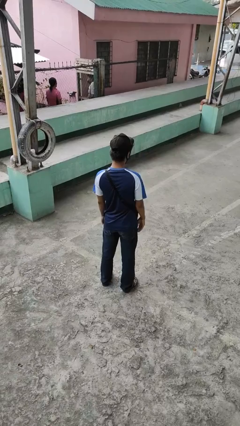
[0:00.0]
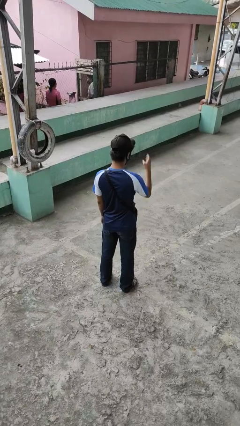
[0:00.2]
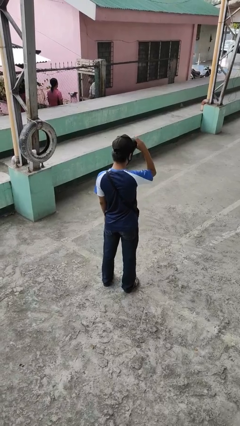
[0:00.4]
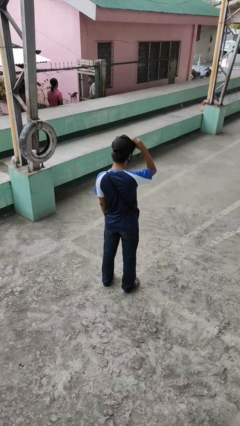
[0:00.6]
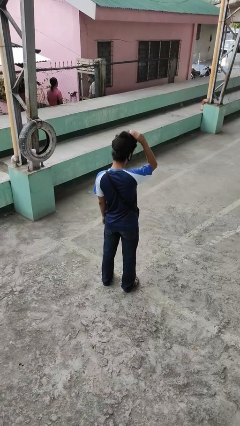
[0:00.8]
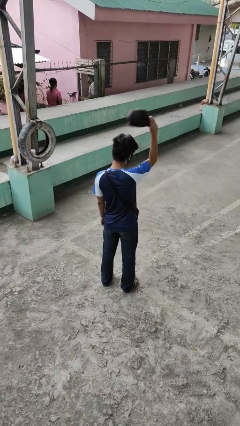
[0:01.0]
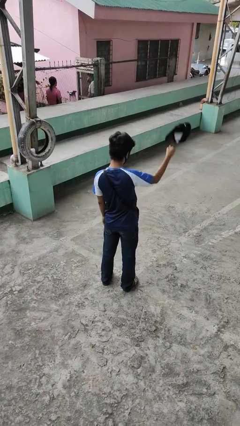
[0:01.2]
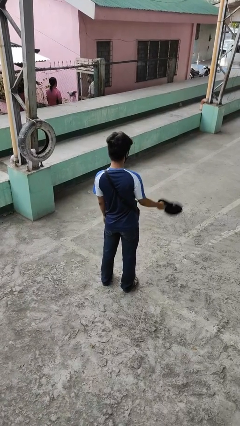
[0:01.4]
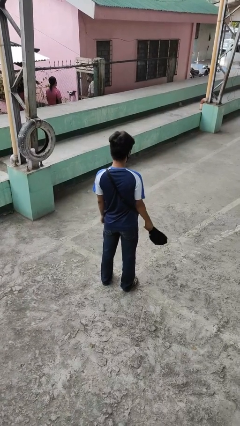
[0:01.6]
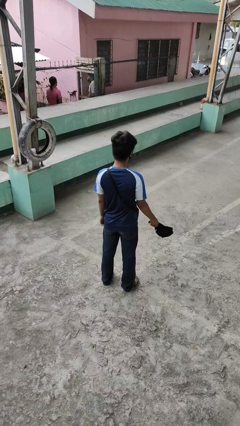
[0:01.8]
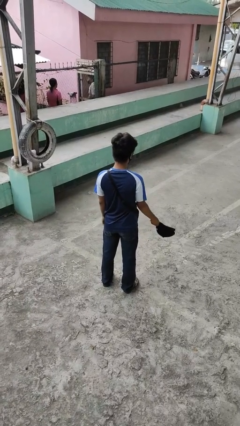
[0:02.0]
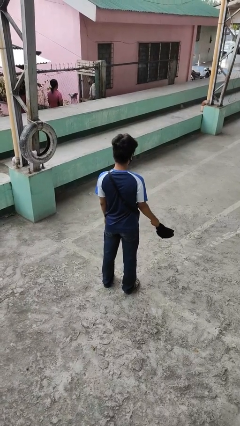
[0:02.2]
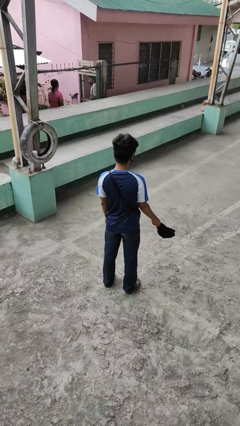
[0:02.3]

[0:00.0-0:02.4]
person takes off hat

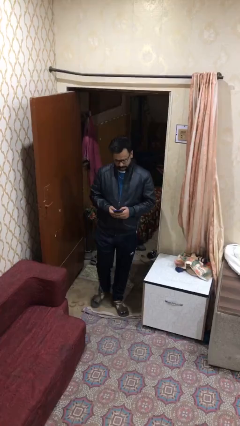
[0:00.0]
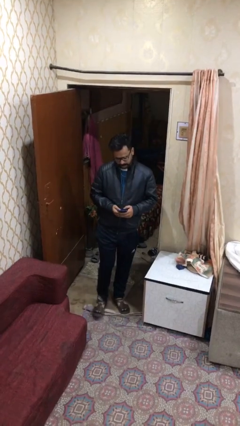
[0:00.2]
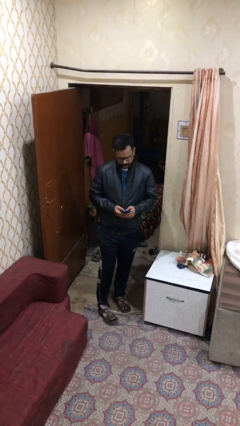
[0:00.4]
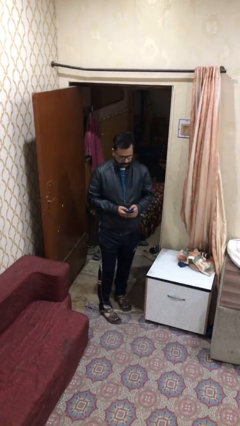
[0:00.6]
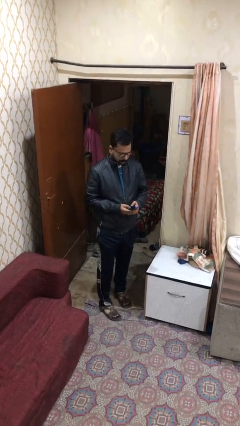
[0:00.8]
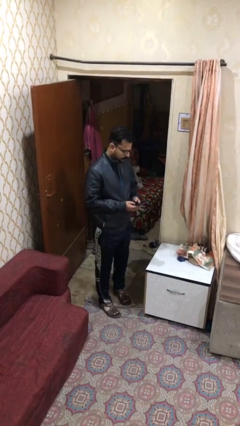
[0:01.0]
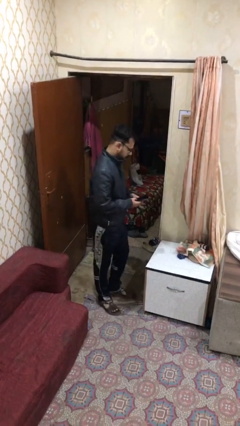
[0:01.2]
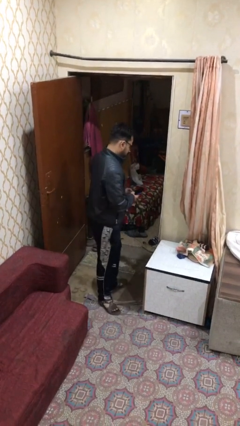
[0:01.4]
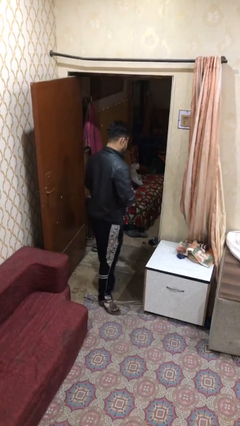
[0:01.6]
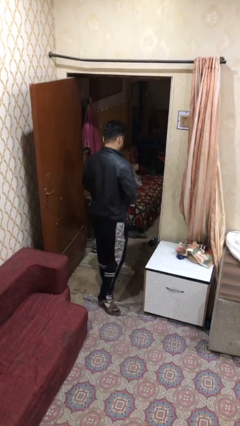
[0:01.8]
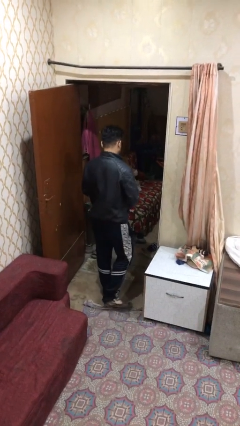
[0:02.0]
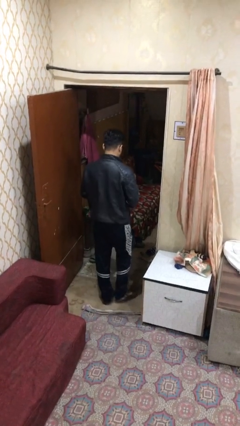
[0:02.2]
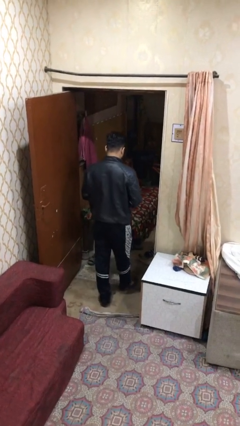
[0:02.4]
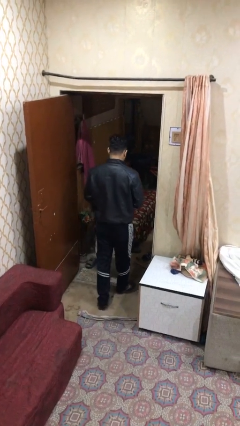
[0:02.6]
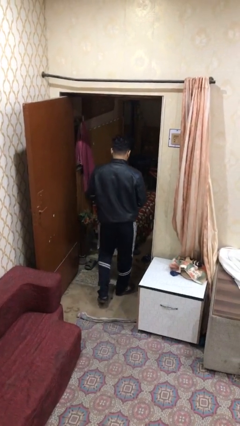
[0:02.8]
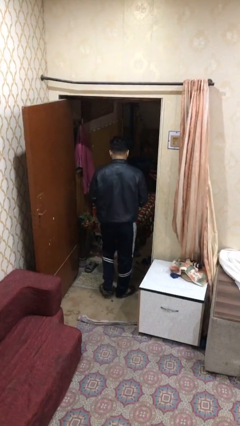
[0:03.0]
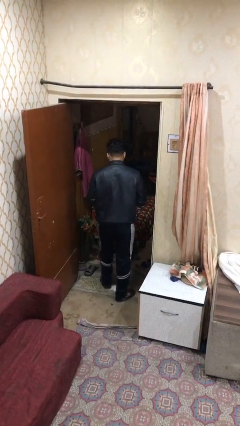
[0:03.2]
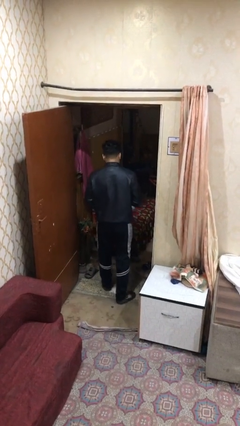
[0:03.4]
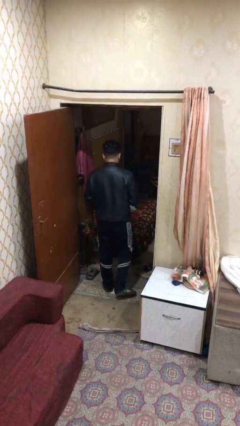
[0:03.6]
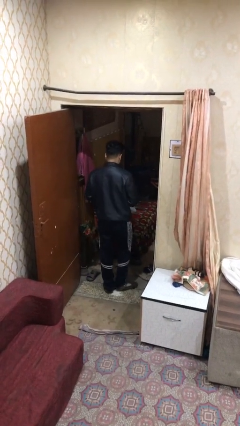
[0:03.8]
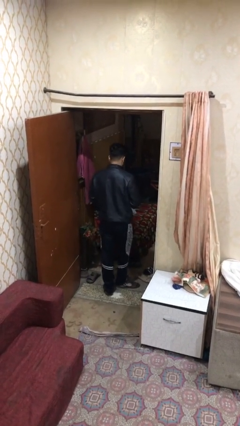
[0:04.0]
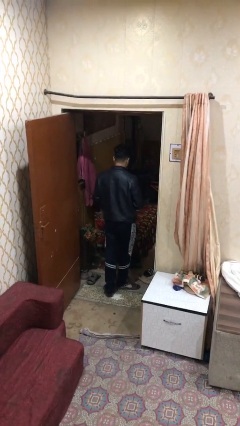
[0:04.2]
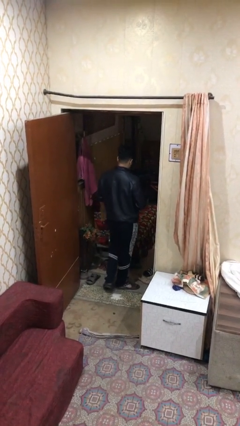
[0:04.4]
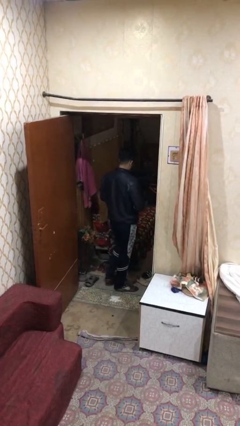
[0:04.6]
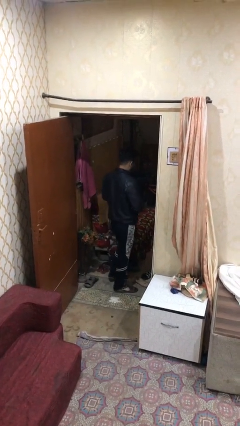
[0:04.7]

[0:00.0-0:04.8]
person exits scene through structure

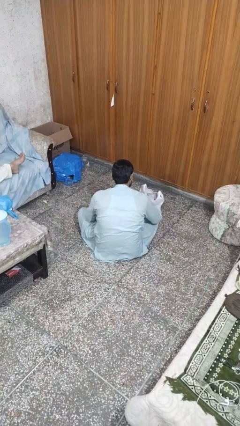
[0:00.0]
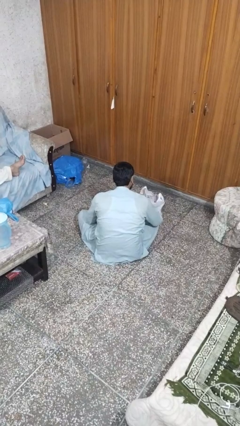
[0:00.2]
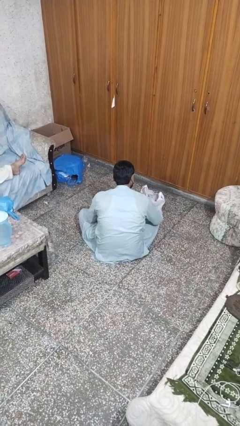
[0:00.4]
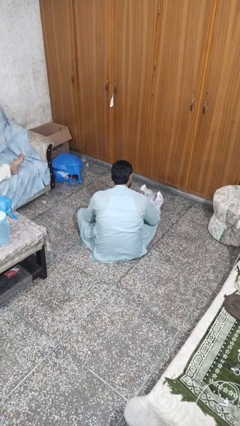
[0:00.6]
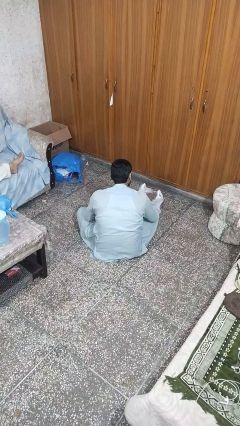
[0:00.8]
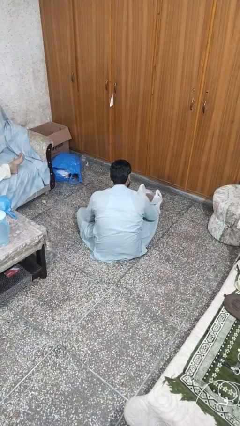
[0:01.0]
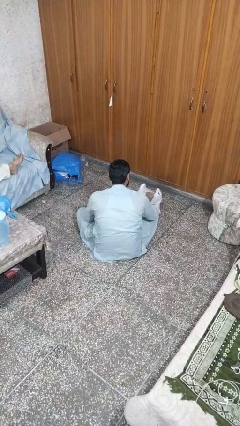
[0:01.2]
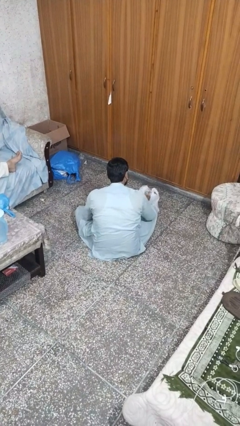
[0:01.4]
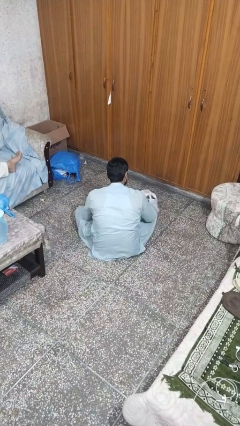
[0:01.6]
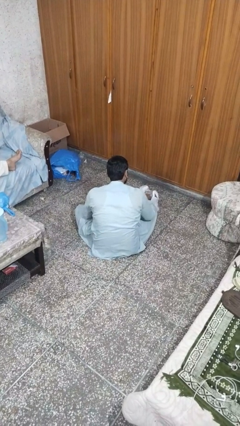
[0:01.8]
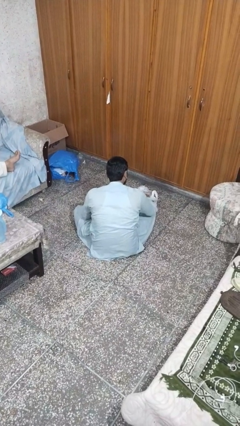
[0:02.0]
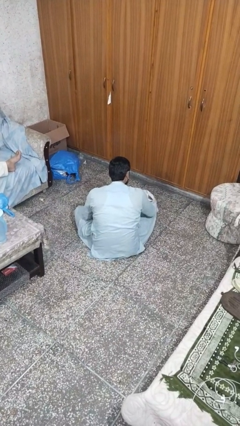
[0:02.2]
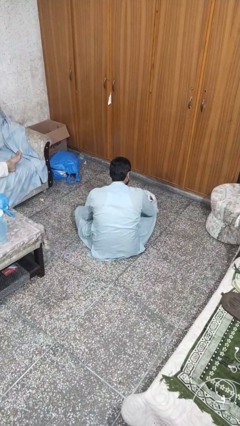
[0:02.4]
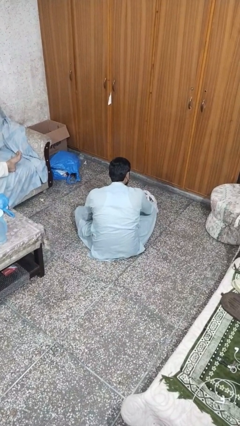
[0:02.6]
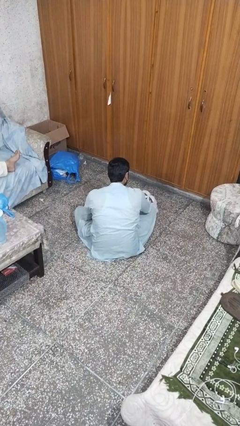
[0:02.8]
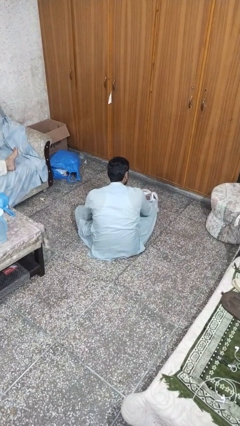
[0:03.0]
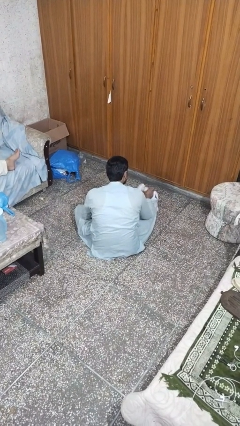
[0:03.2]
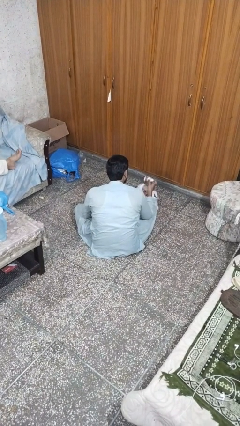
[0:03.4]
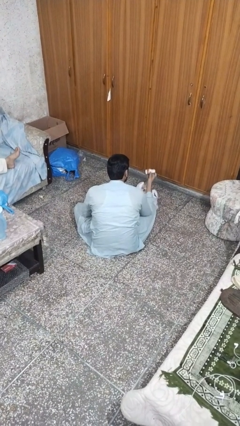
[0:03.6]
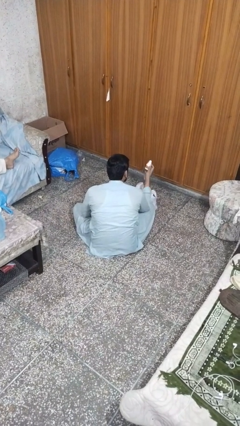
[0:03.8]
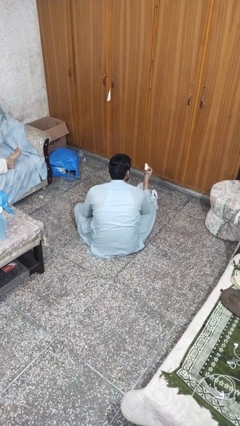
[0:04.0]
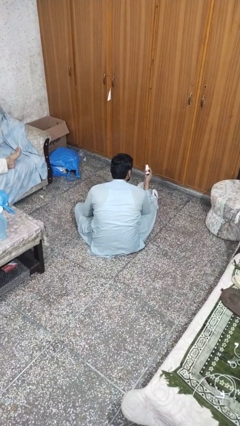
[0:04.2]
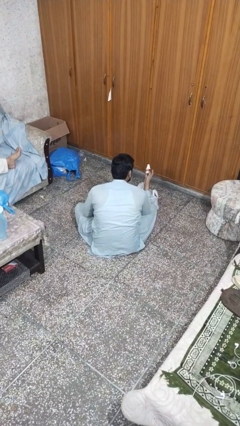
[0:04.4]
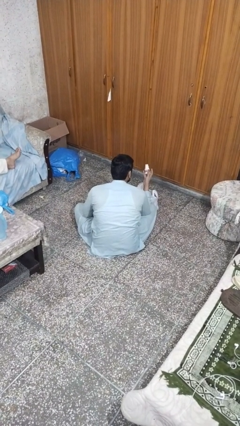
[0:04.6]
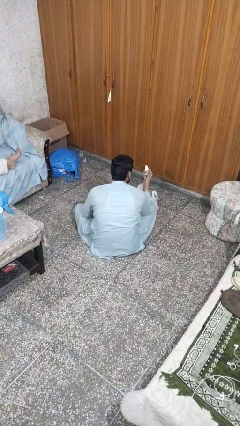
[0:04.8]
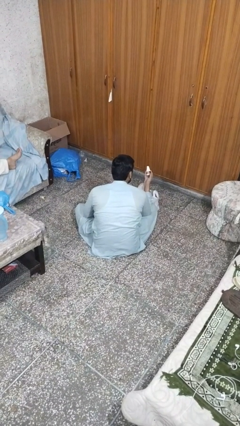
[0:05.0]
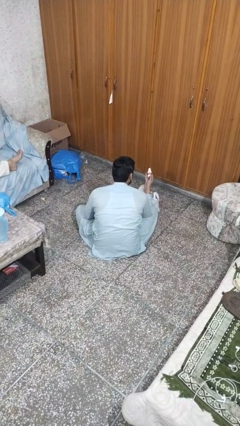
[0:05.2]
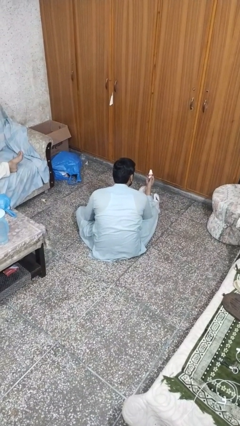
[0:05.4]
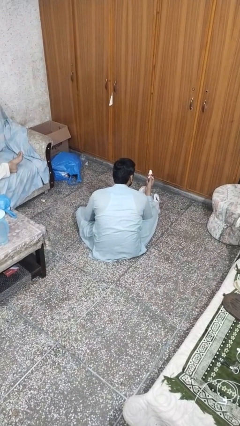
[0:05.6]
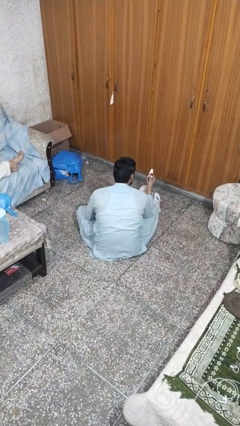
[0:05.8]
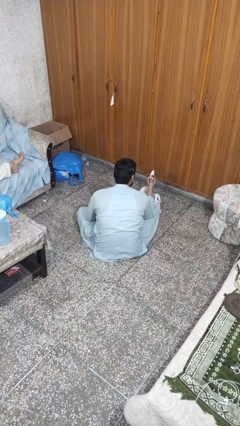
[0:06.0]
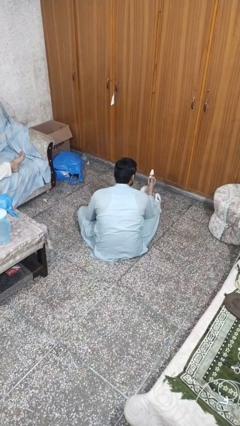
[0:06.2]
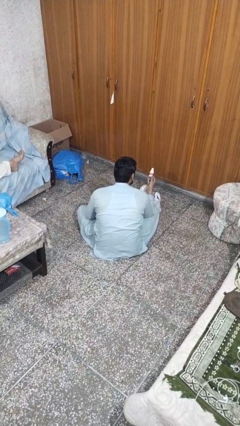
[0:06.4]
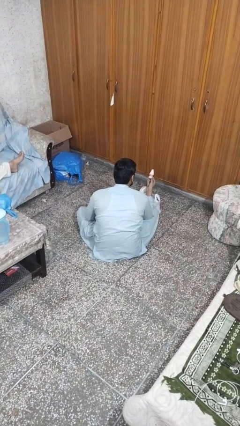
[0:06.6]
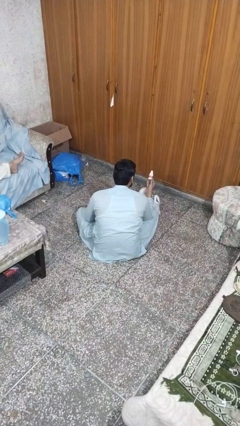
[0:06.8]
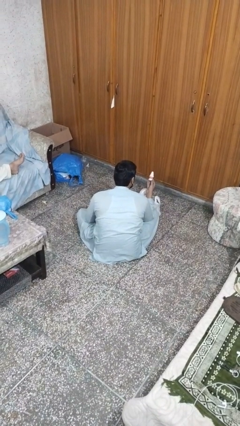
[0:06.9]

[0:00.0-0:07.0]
person takes object from bag

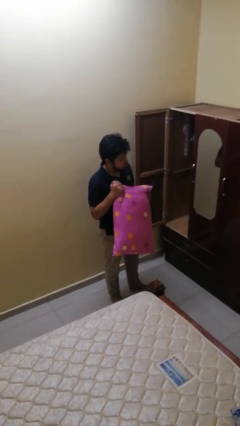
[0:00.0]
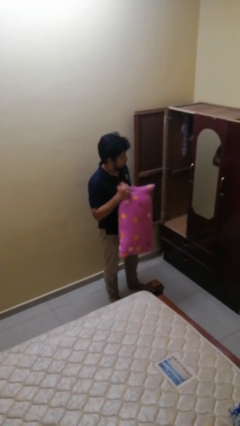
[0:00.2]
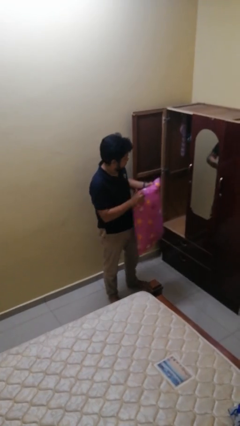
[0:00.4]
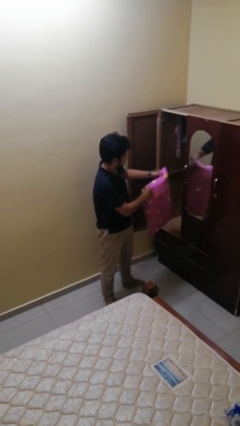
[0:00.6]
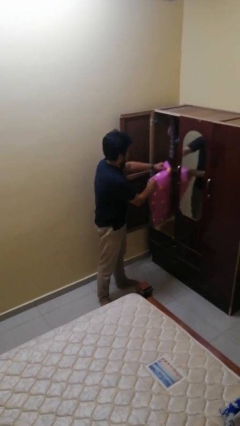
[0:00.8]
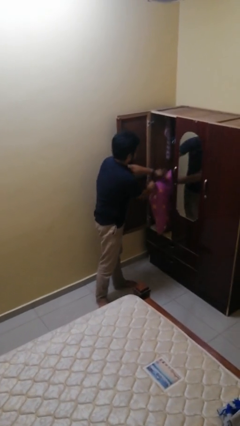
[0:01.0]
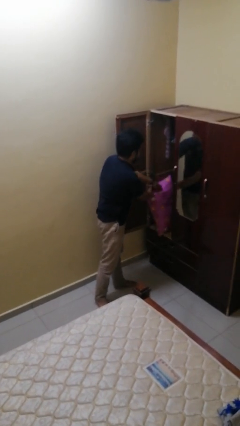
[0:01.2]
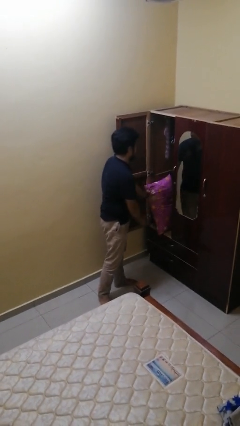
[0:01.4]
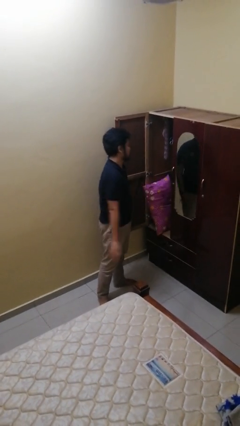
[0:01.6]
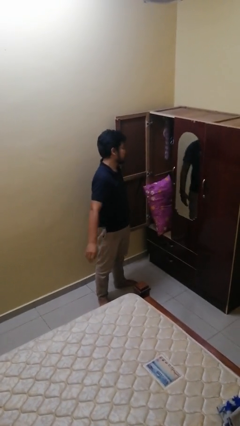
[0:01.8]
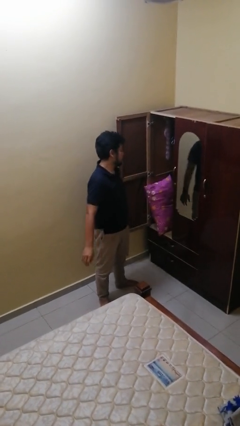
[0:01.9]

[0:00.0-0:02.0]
person puts down object into cabinet

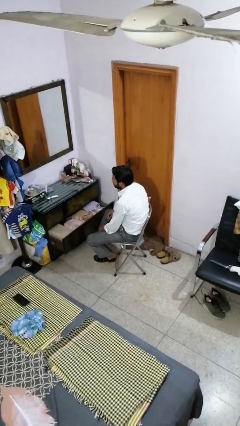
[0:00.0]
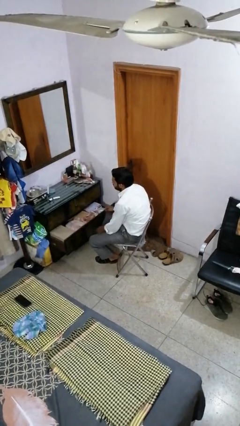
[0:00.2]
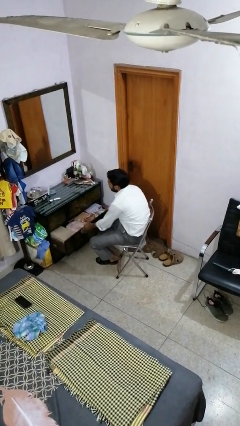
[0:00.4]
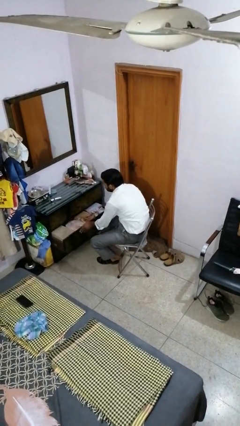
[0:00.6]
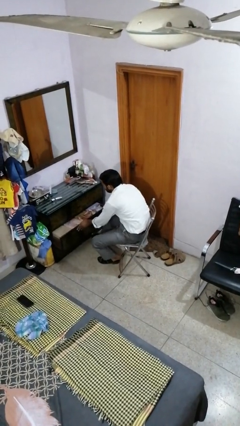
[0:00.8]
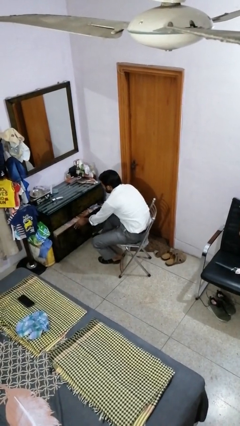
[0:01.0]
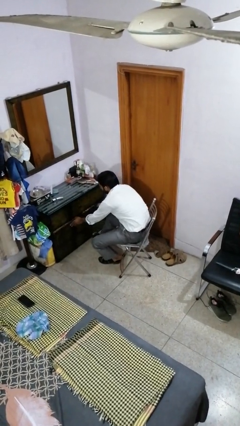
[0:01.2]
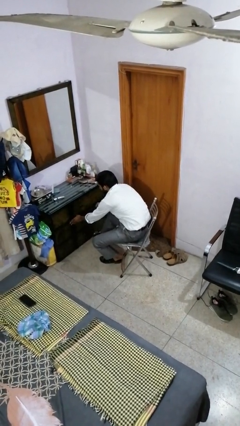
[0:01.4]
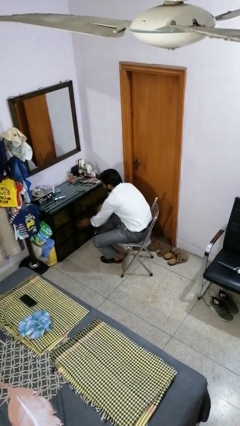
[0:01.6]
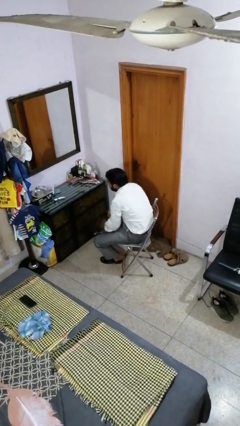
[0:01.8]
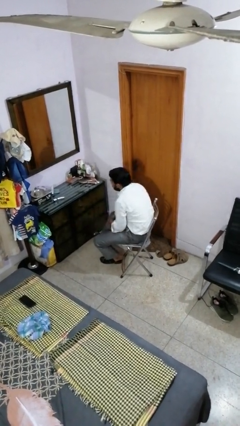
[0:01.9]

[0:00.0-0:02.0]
person closes dresser drawer
